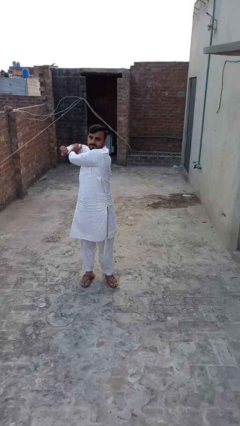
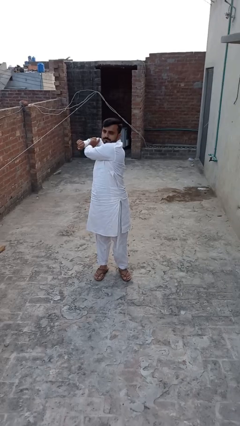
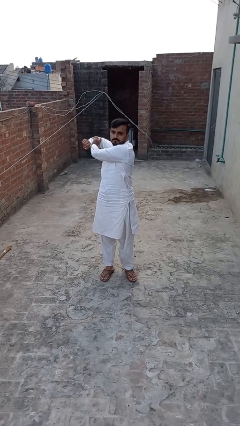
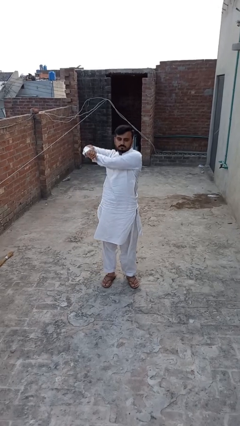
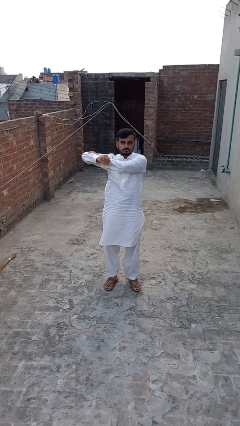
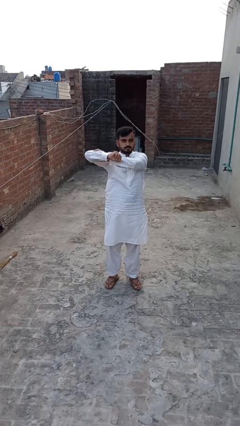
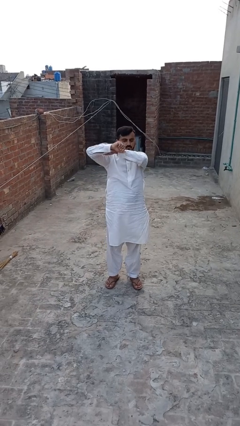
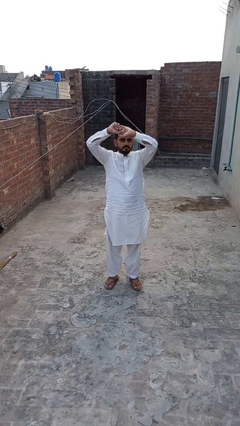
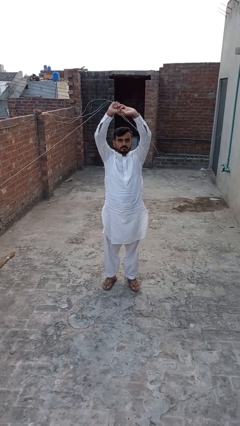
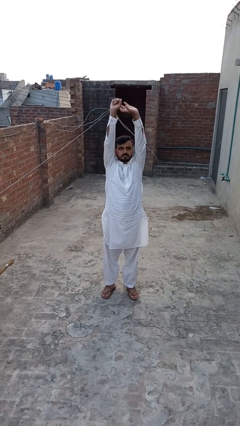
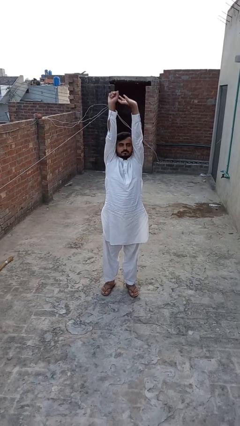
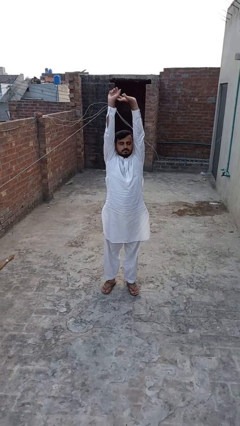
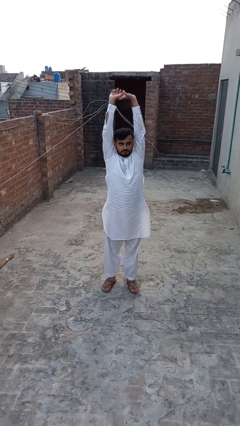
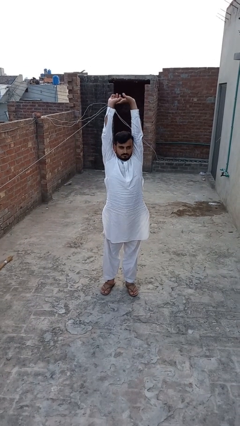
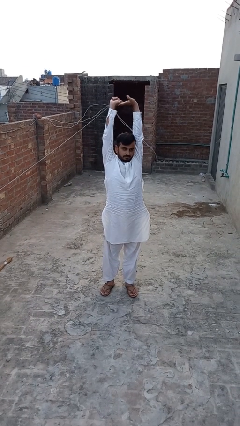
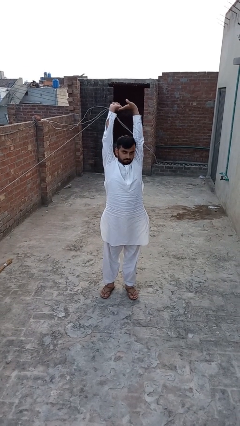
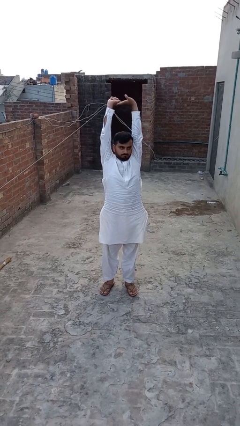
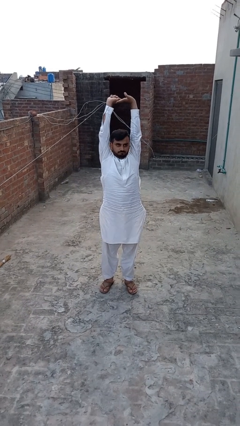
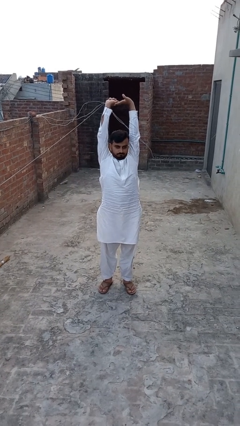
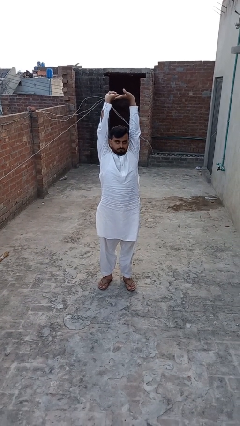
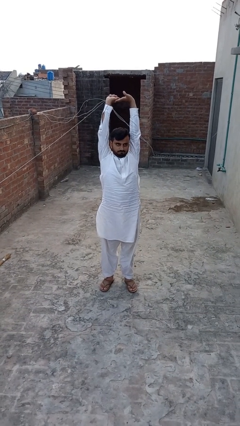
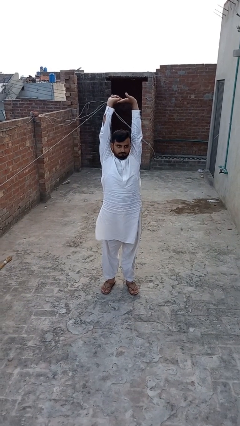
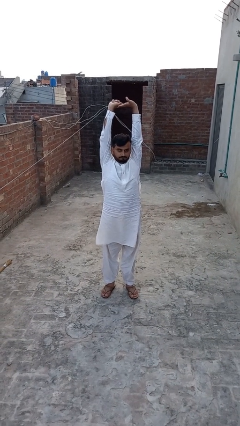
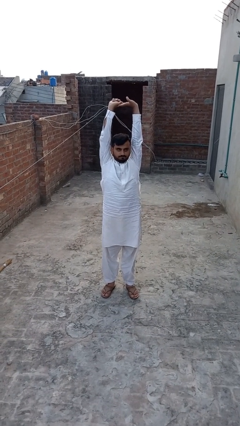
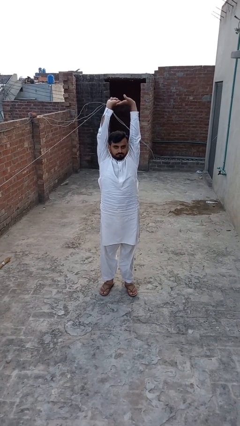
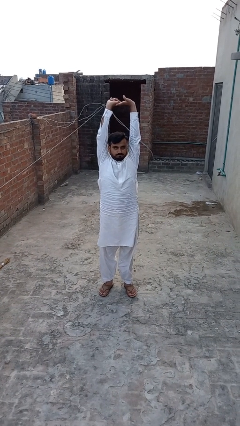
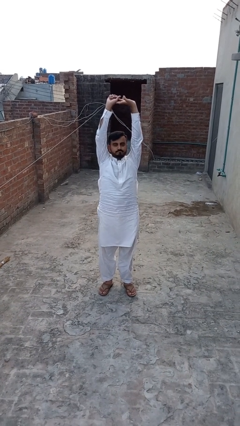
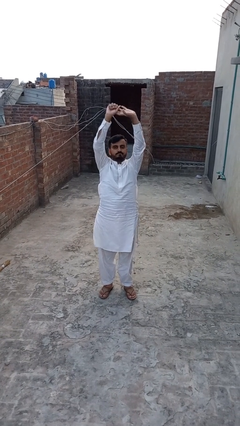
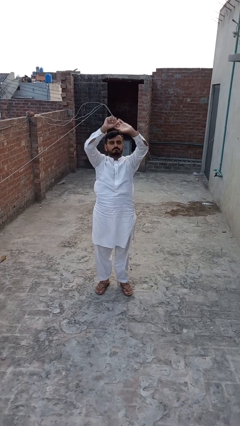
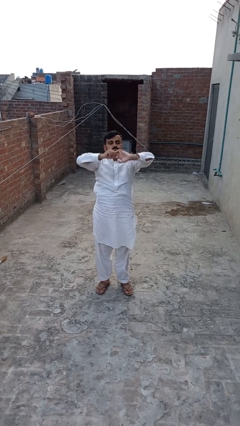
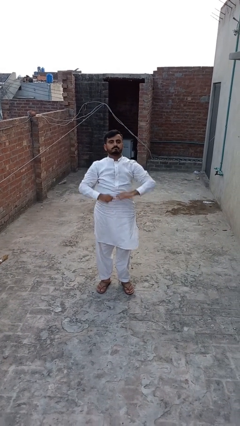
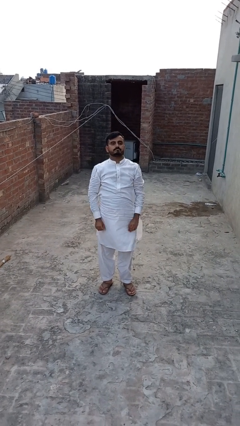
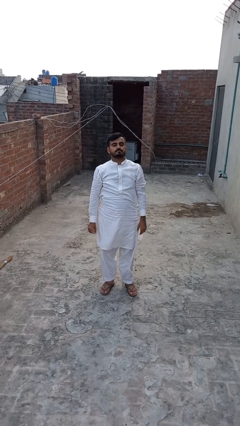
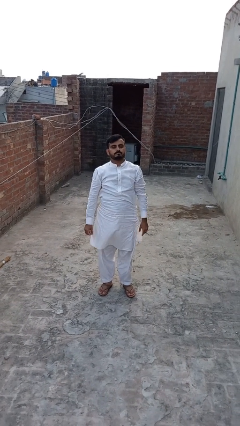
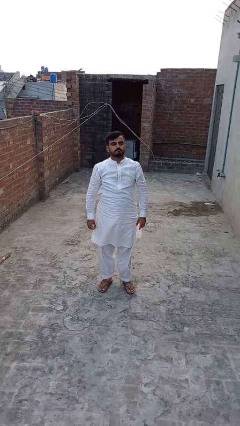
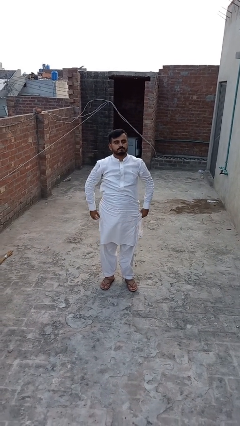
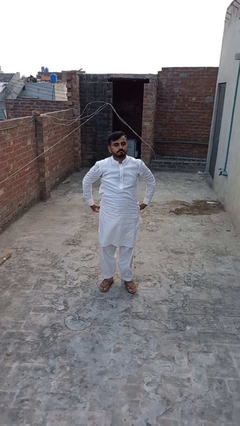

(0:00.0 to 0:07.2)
person stretches arms over head

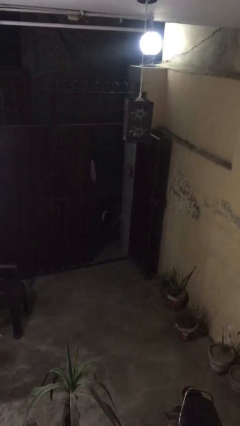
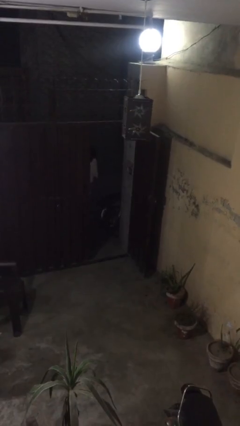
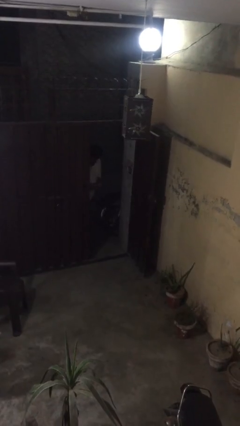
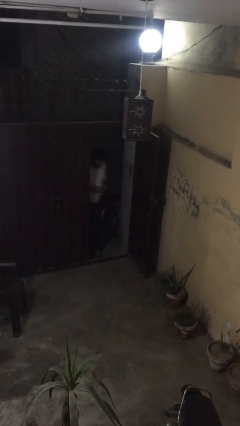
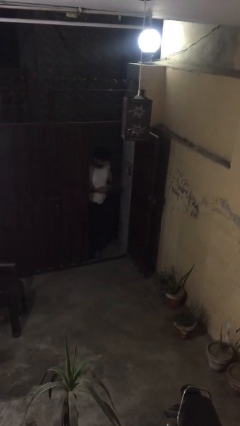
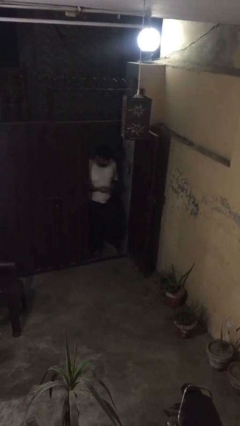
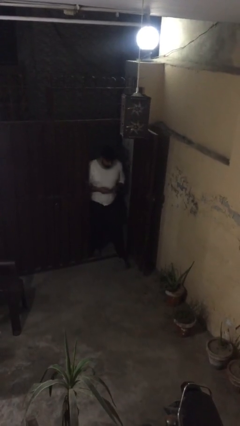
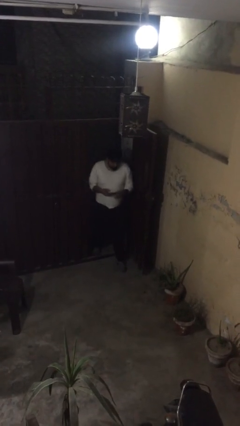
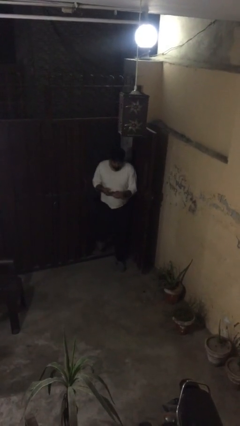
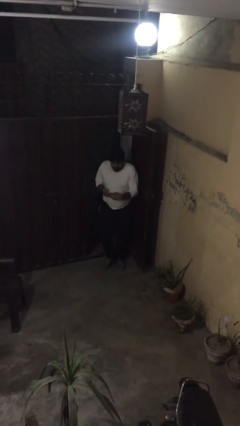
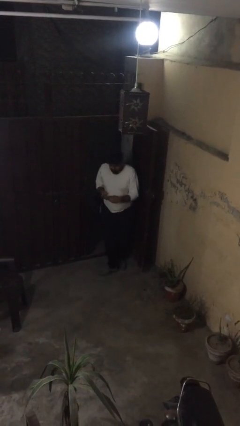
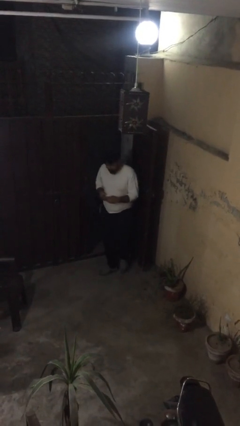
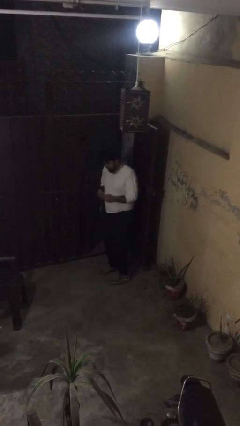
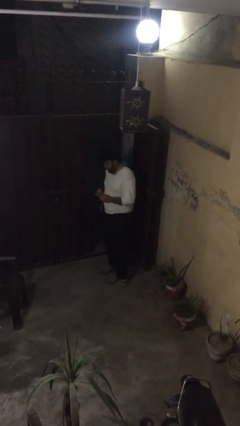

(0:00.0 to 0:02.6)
person enters scene through structure

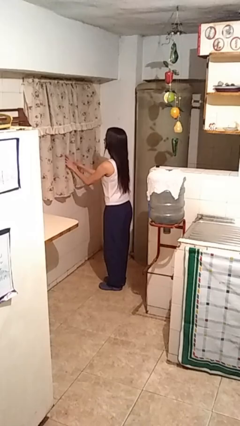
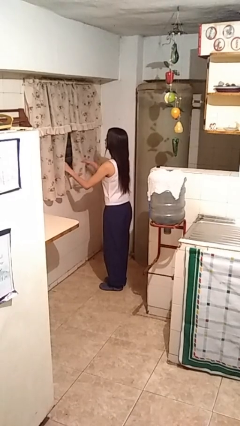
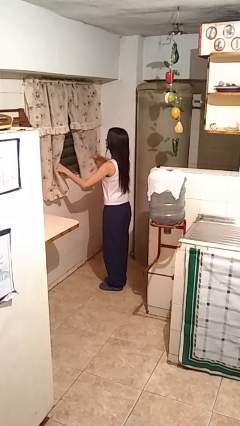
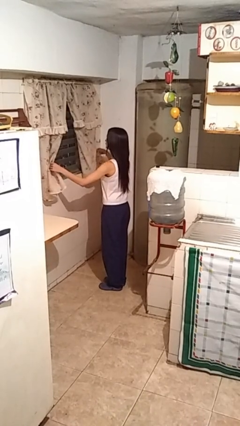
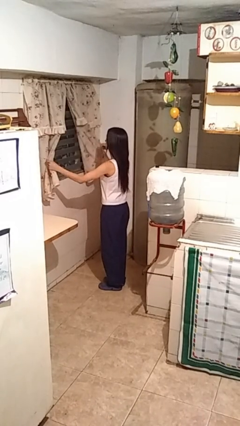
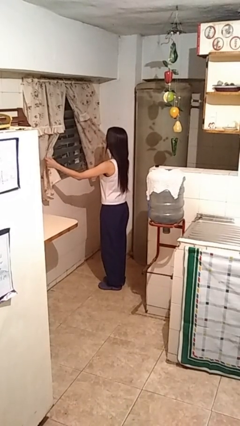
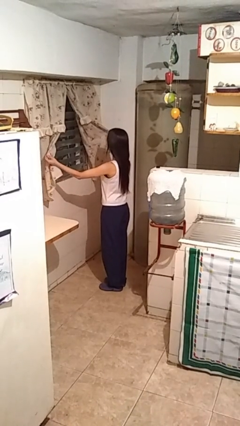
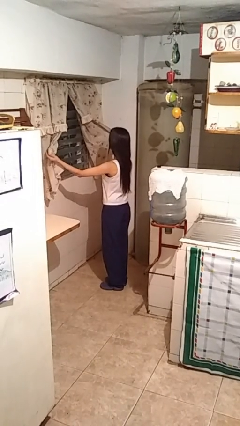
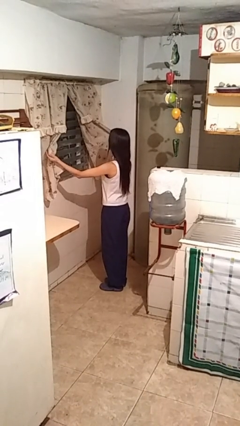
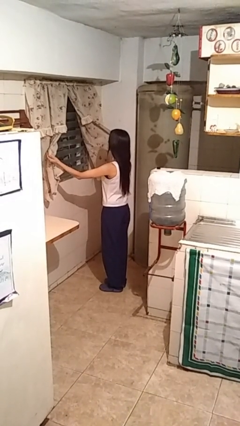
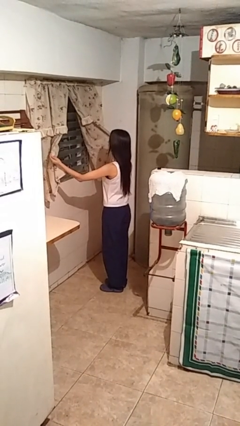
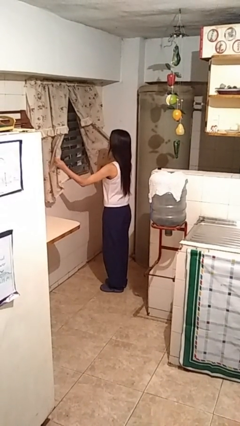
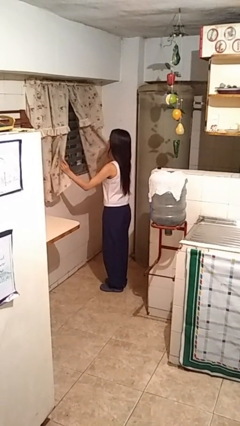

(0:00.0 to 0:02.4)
person opens curtains

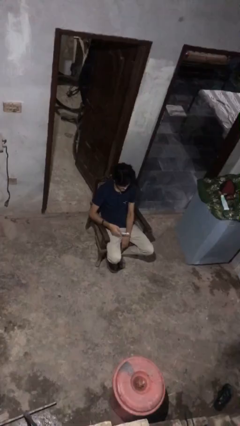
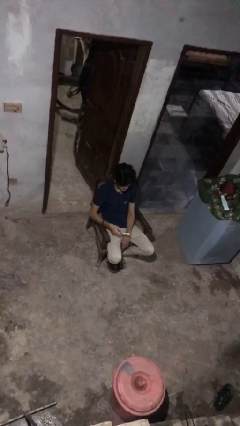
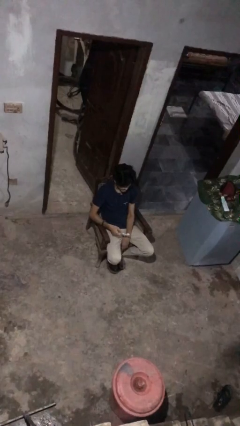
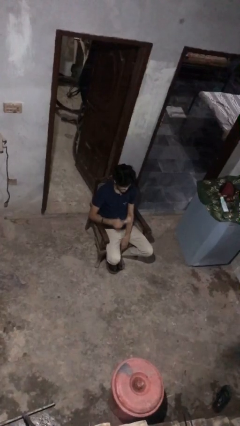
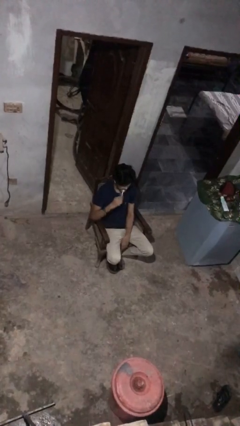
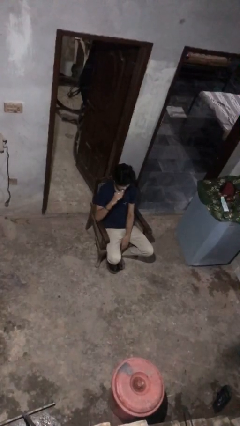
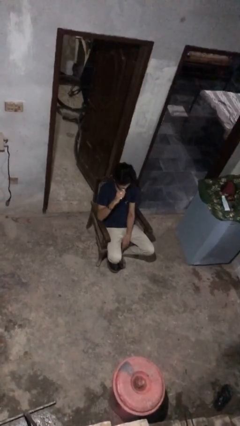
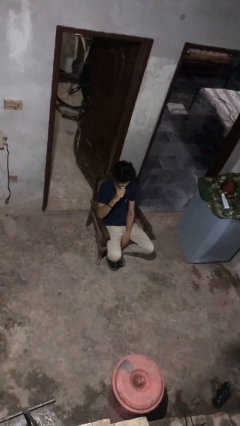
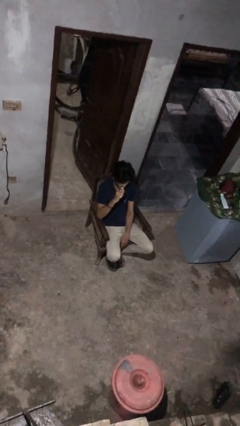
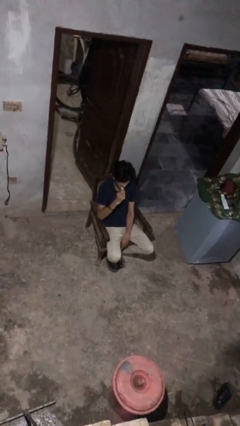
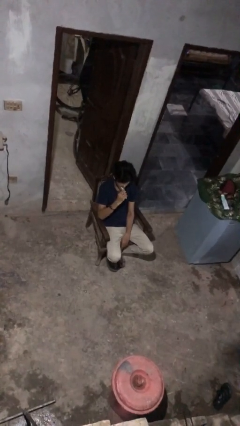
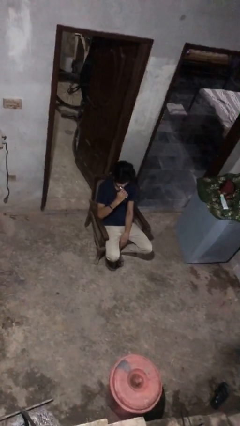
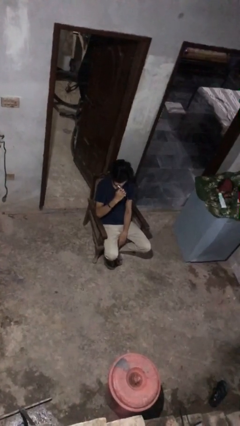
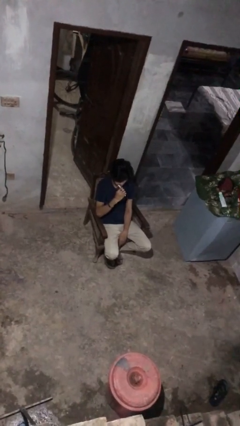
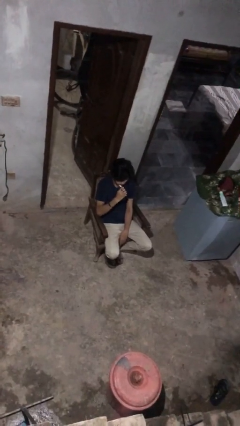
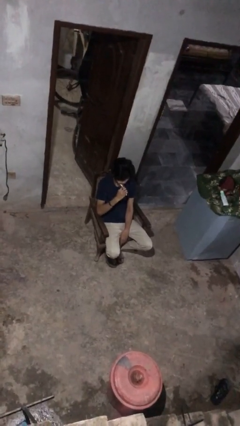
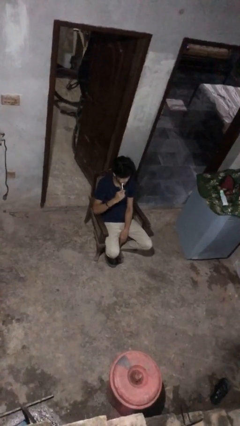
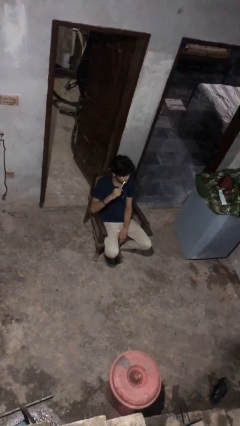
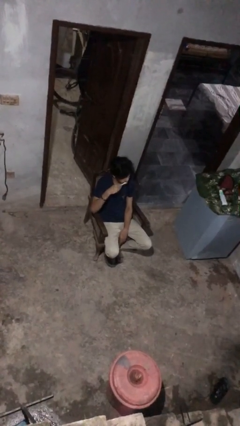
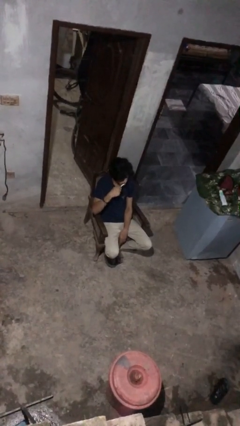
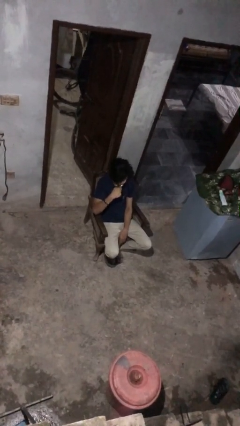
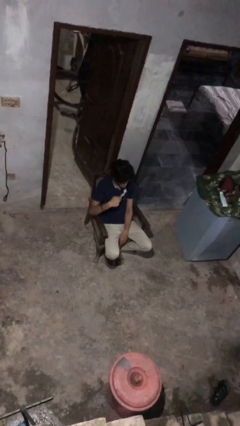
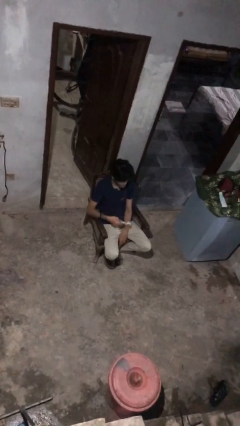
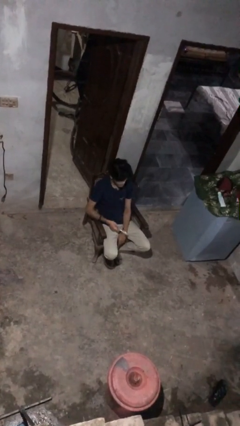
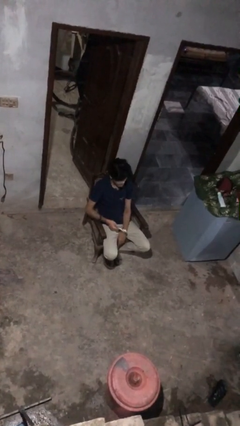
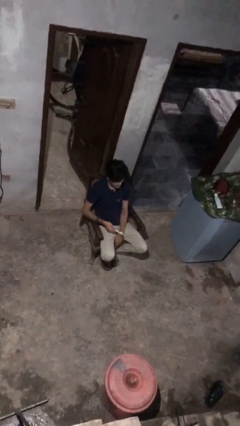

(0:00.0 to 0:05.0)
person brushes teeth

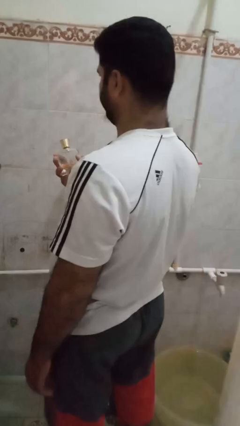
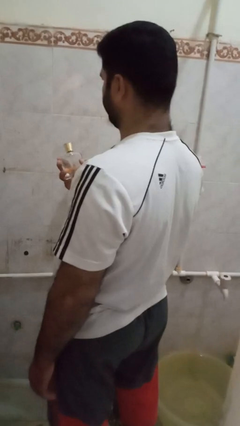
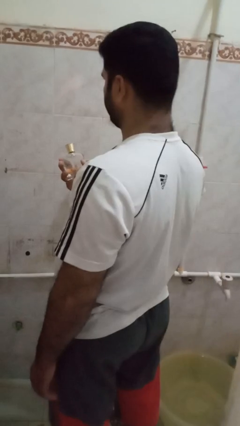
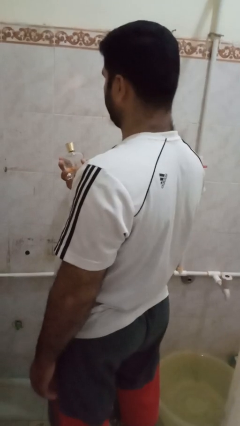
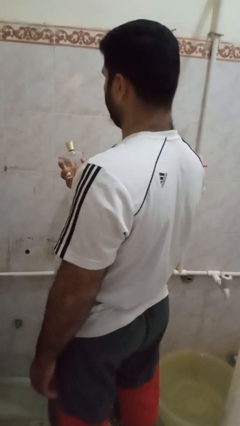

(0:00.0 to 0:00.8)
person applies deodorant
